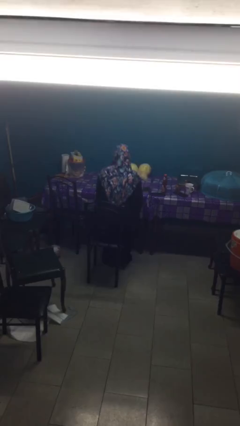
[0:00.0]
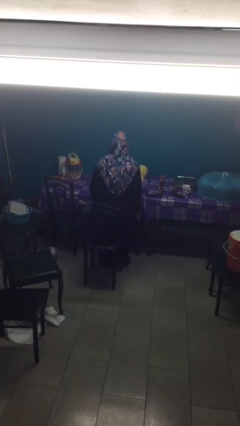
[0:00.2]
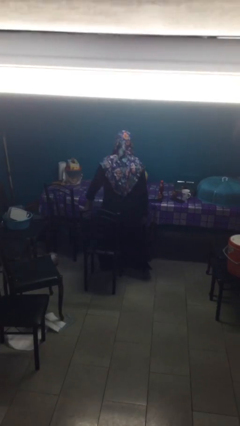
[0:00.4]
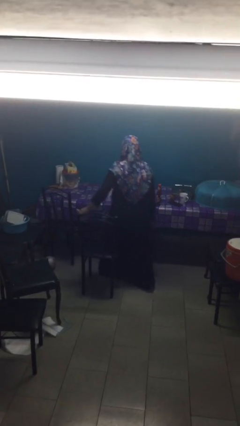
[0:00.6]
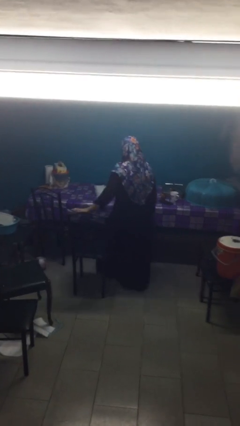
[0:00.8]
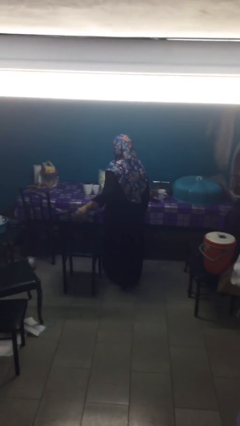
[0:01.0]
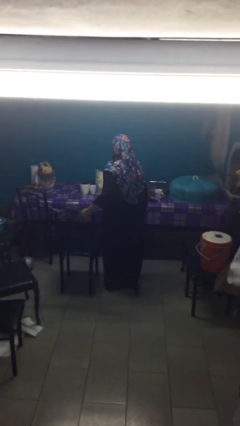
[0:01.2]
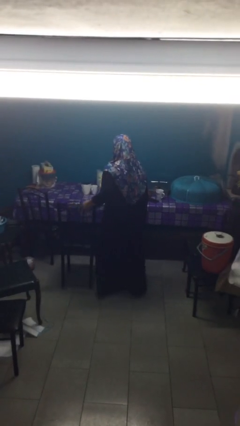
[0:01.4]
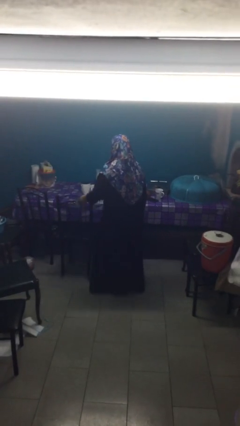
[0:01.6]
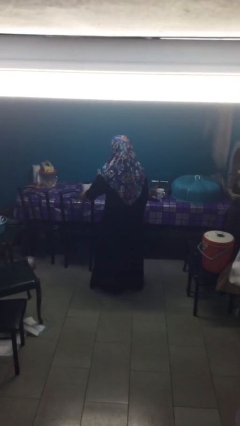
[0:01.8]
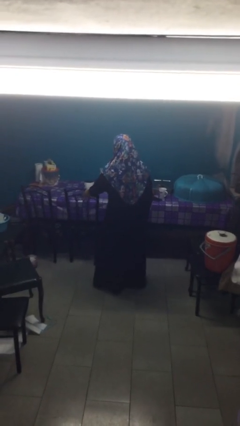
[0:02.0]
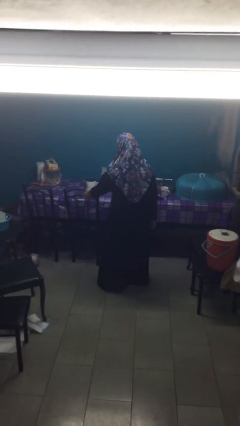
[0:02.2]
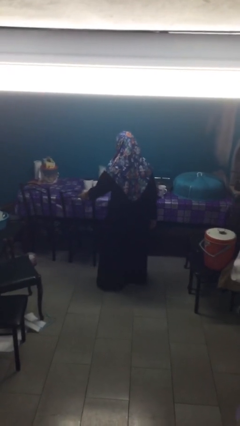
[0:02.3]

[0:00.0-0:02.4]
person stands up

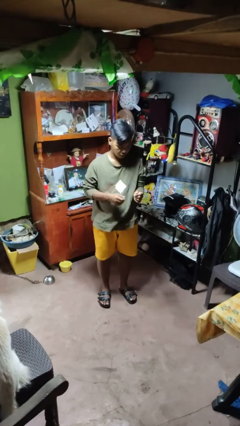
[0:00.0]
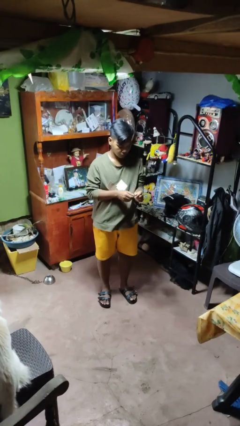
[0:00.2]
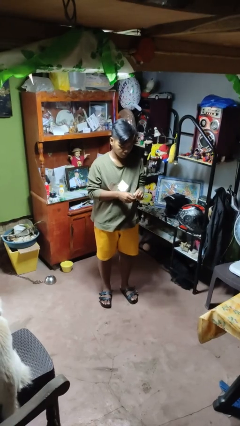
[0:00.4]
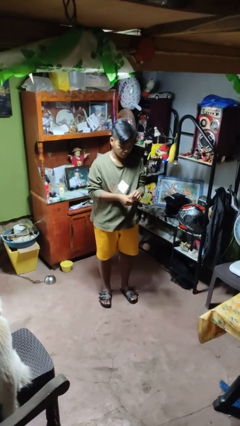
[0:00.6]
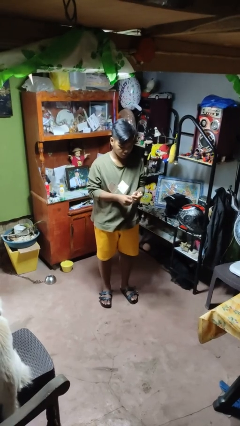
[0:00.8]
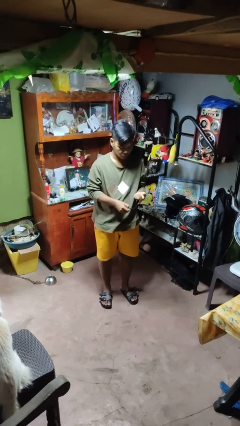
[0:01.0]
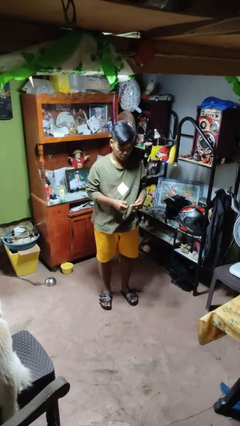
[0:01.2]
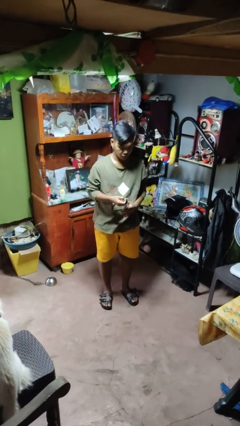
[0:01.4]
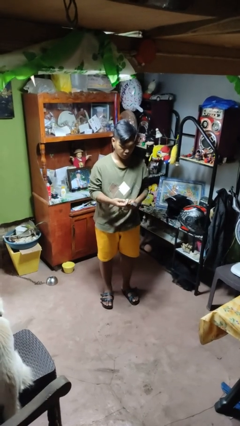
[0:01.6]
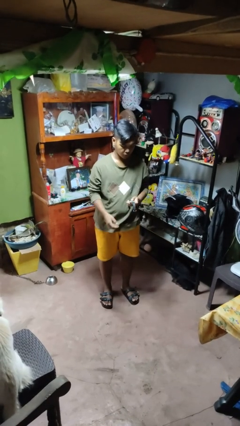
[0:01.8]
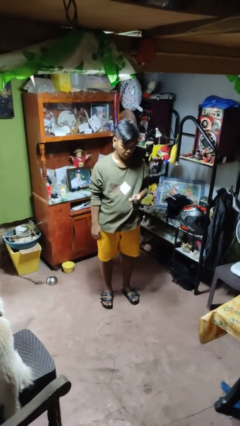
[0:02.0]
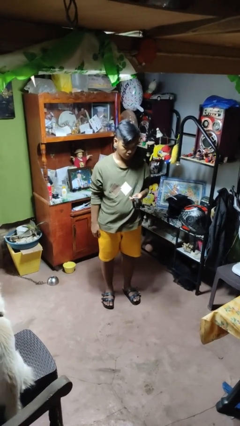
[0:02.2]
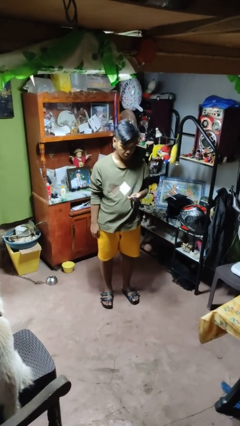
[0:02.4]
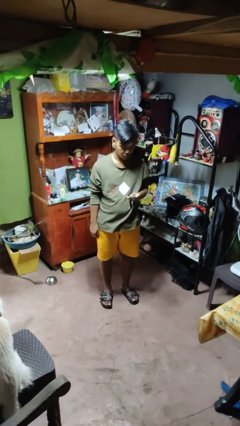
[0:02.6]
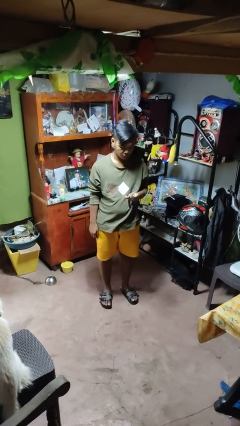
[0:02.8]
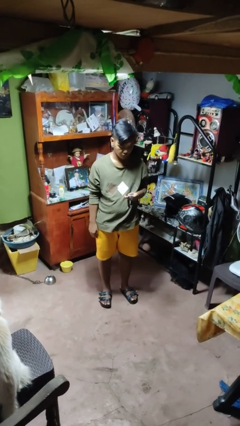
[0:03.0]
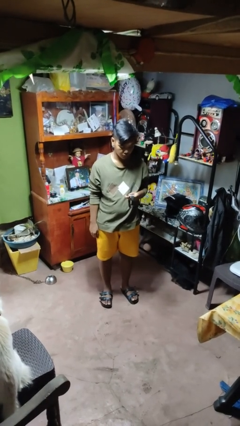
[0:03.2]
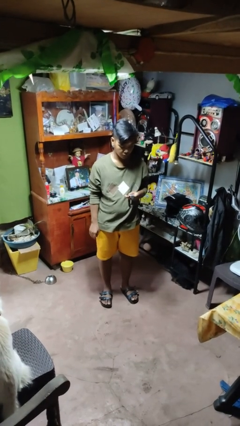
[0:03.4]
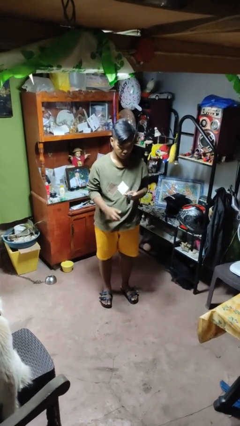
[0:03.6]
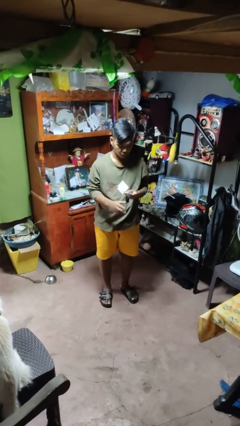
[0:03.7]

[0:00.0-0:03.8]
person takes off wristwatch

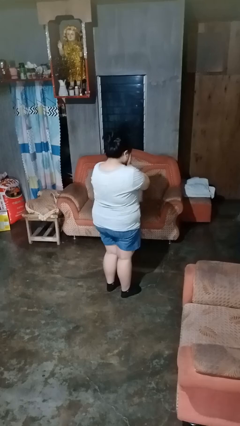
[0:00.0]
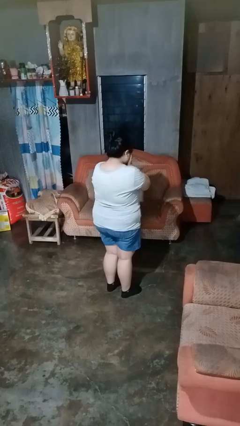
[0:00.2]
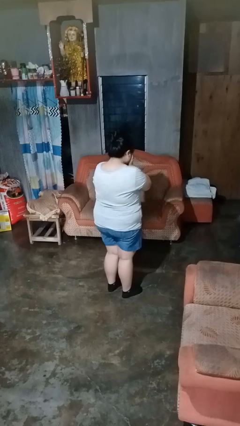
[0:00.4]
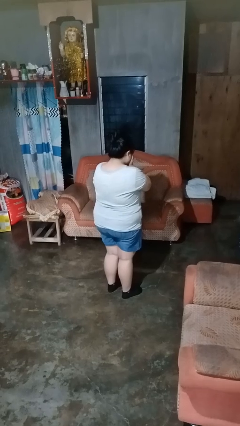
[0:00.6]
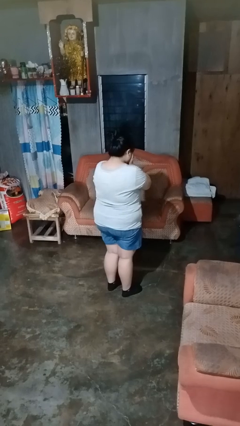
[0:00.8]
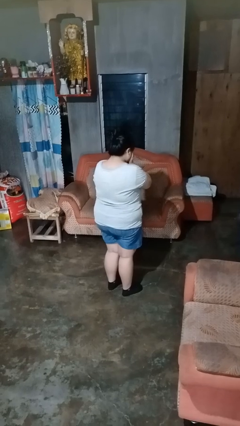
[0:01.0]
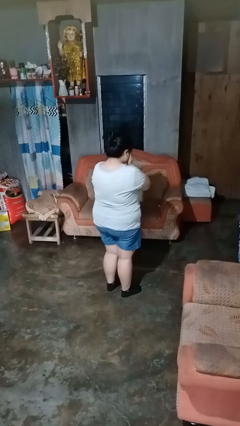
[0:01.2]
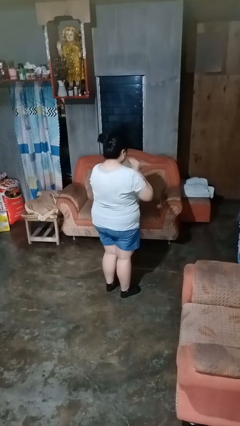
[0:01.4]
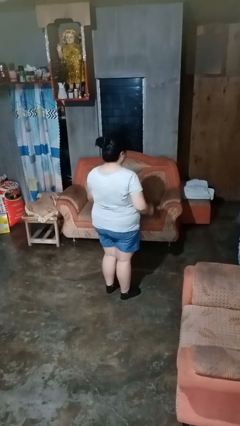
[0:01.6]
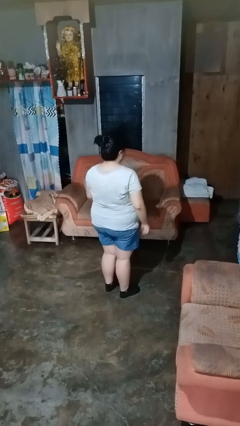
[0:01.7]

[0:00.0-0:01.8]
person covers face with hands

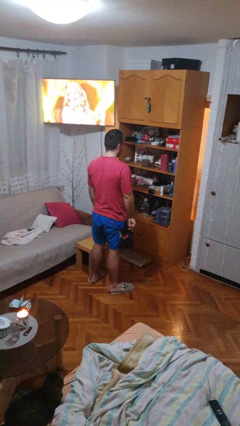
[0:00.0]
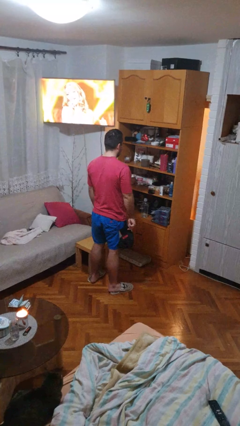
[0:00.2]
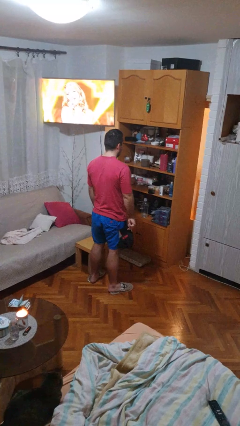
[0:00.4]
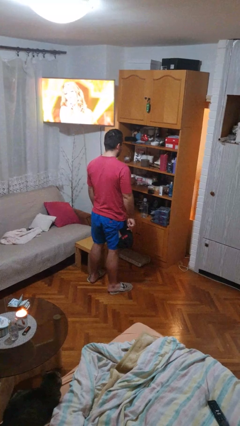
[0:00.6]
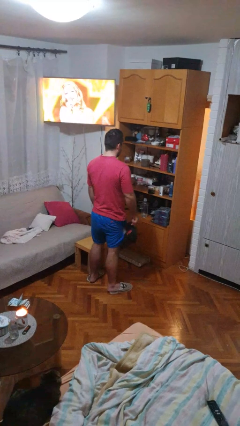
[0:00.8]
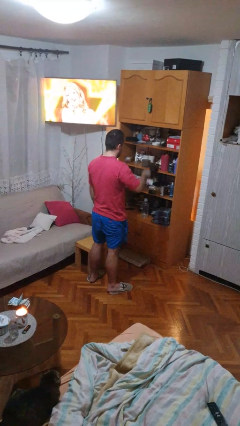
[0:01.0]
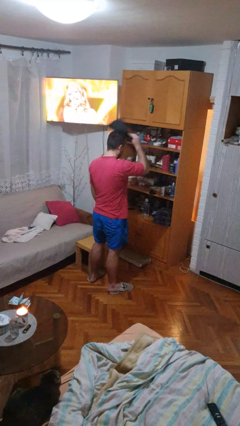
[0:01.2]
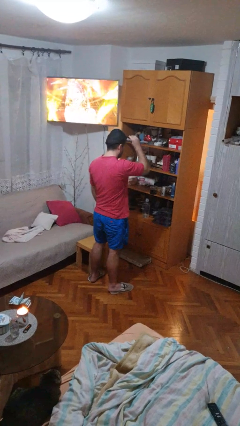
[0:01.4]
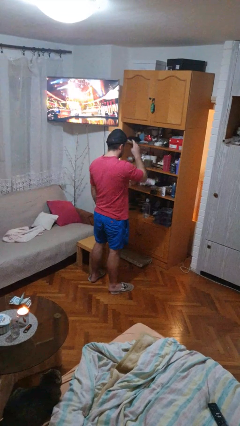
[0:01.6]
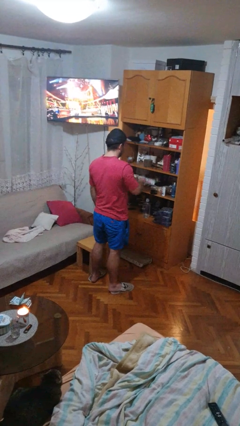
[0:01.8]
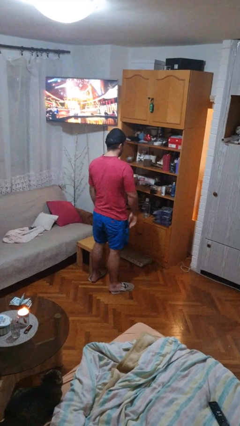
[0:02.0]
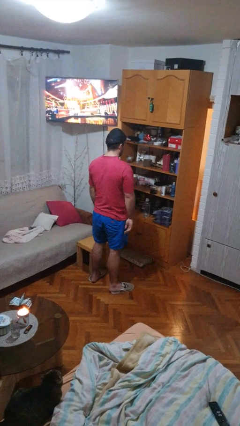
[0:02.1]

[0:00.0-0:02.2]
person puts on hat

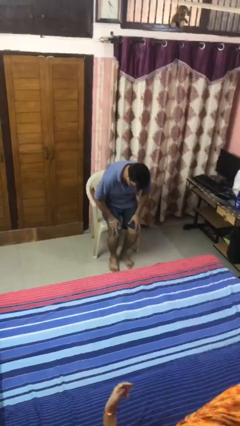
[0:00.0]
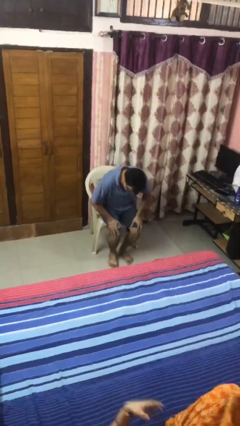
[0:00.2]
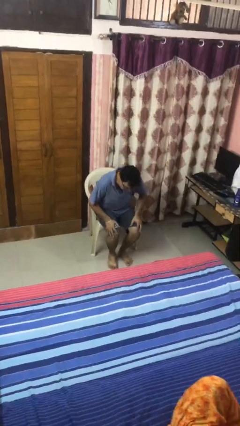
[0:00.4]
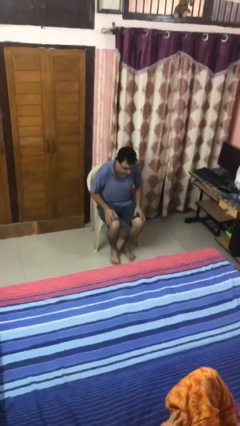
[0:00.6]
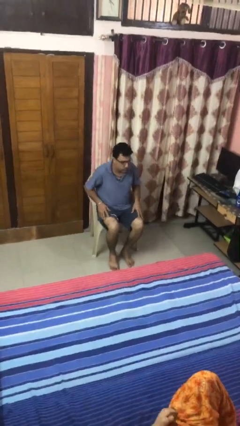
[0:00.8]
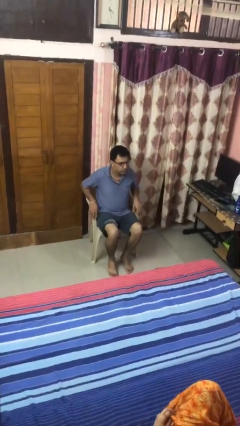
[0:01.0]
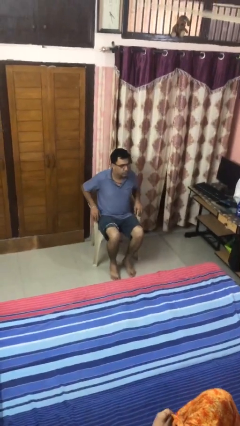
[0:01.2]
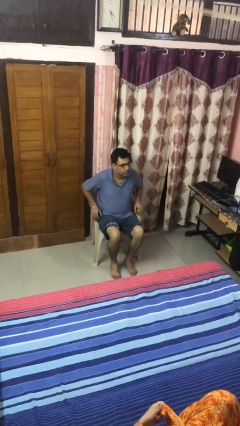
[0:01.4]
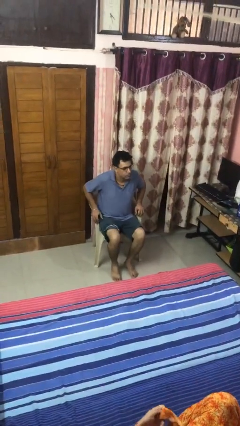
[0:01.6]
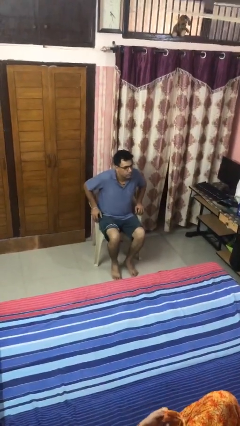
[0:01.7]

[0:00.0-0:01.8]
person sits down

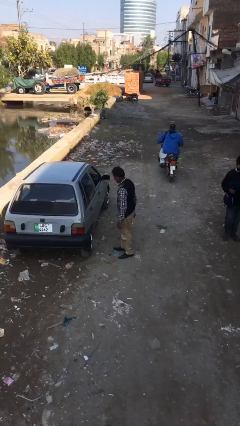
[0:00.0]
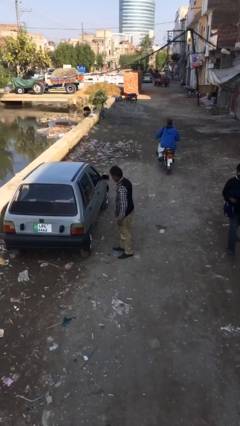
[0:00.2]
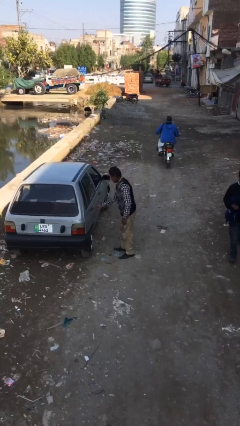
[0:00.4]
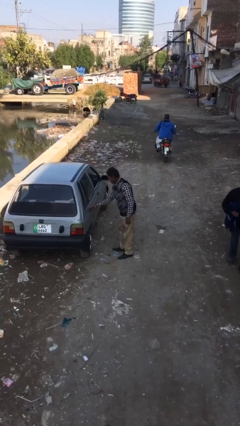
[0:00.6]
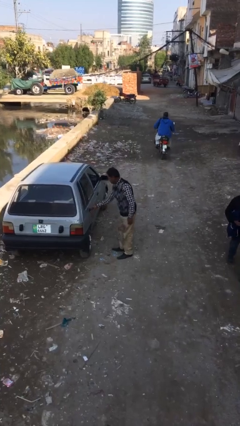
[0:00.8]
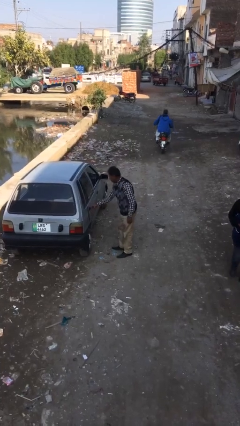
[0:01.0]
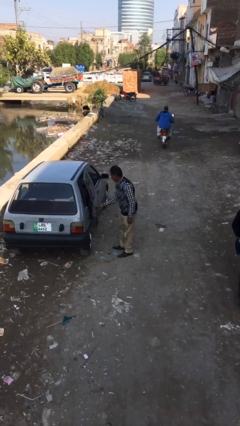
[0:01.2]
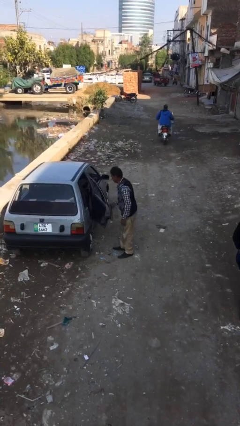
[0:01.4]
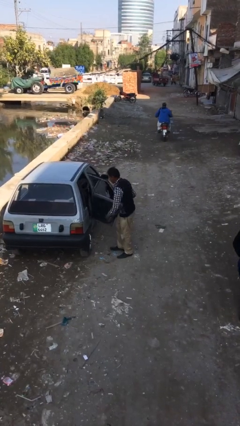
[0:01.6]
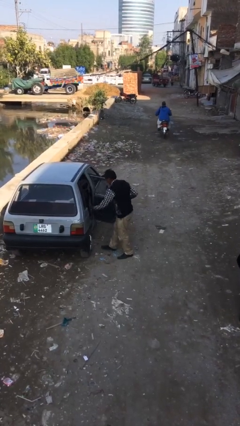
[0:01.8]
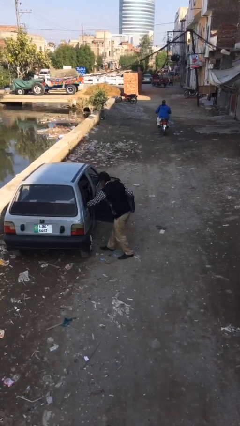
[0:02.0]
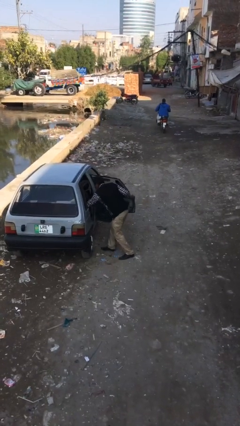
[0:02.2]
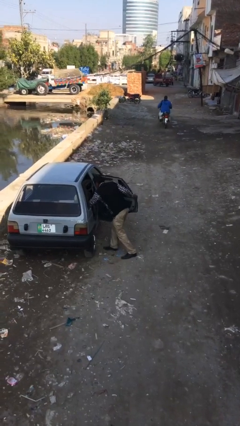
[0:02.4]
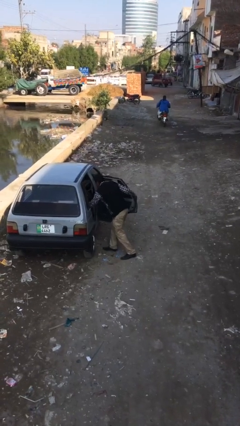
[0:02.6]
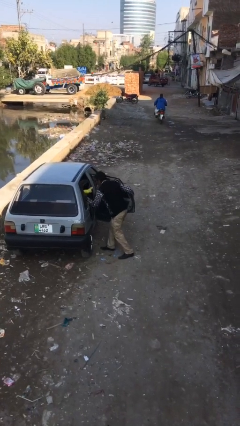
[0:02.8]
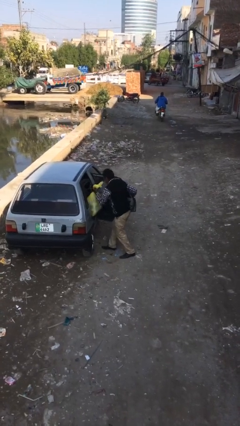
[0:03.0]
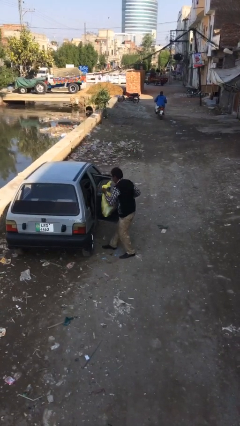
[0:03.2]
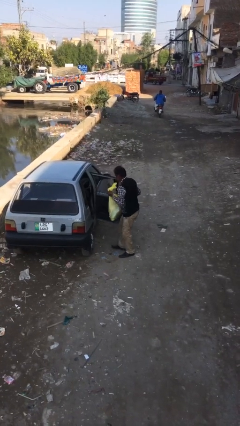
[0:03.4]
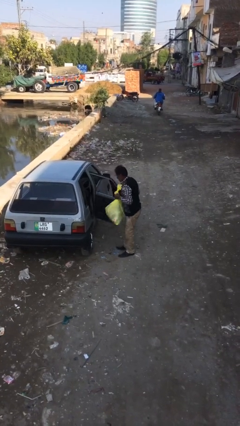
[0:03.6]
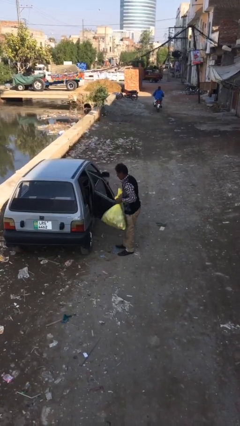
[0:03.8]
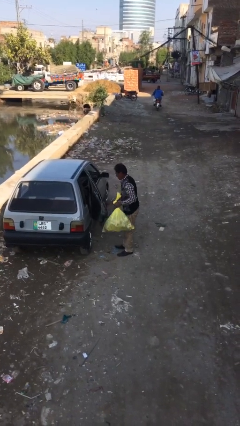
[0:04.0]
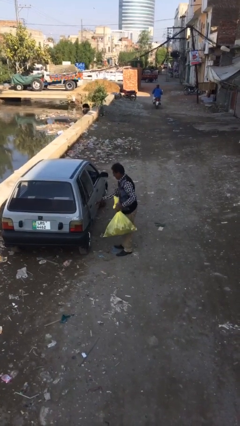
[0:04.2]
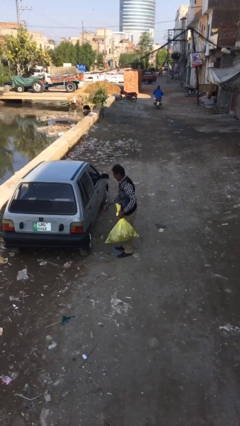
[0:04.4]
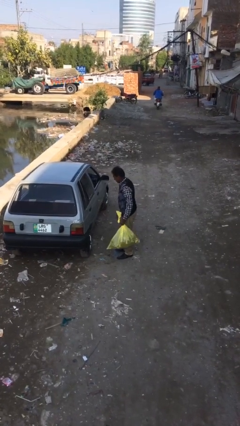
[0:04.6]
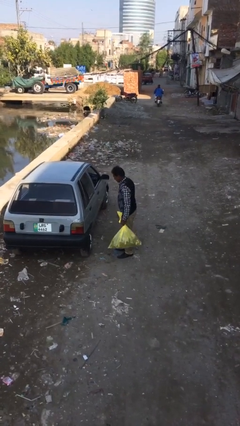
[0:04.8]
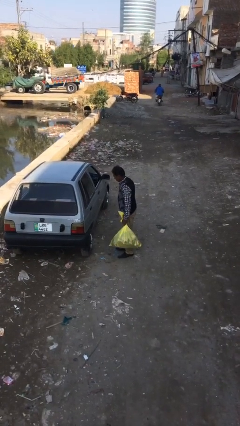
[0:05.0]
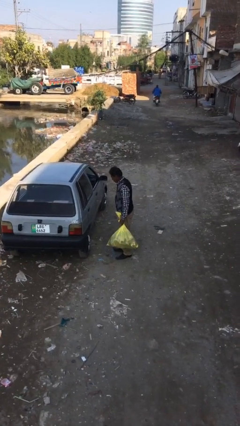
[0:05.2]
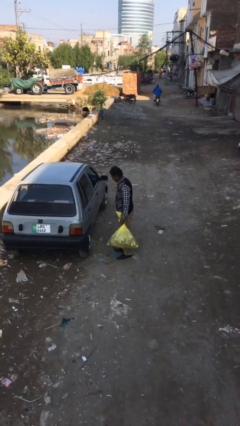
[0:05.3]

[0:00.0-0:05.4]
person unloads car
